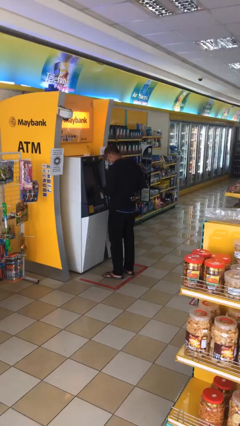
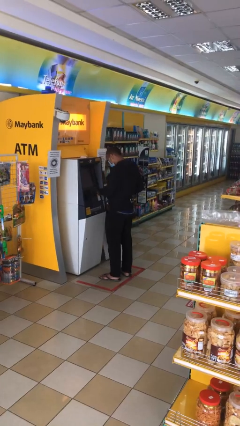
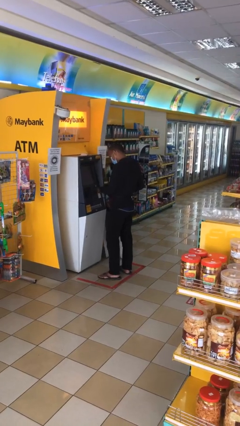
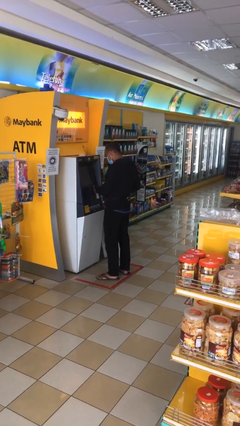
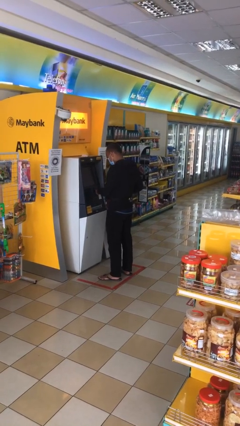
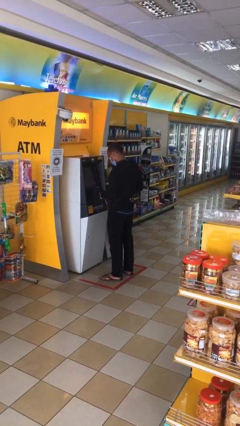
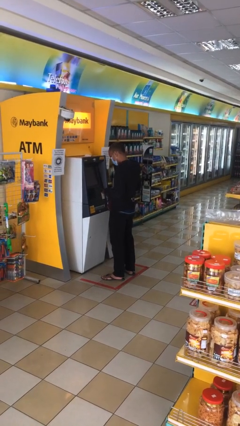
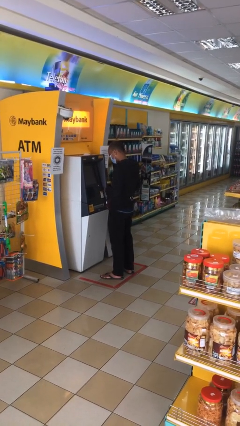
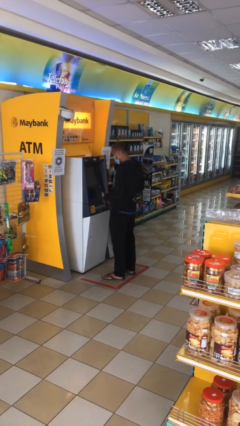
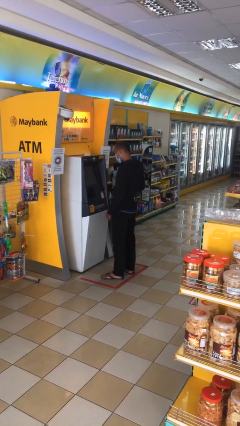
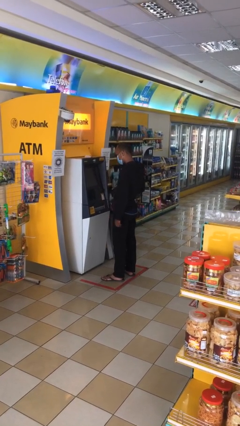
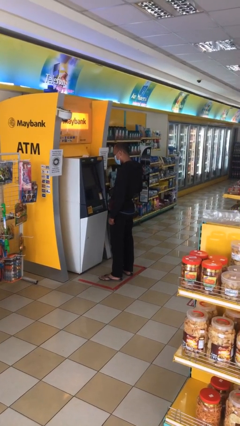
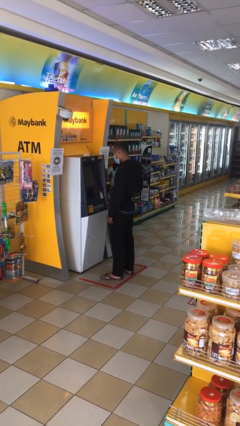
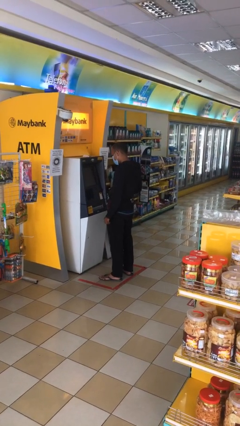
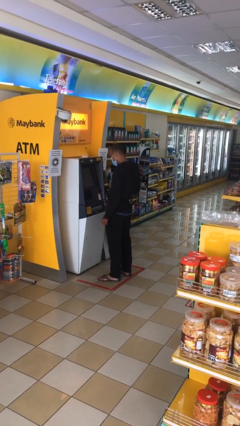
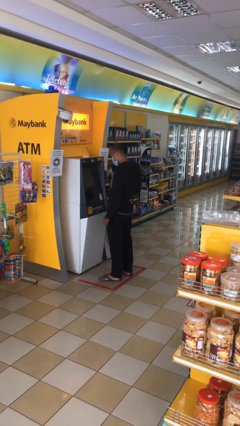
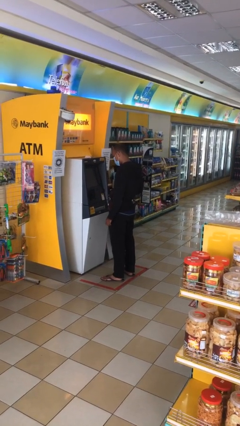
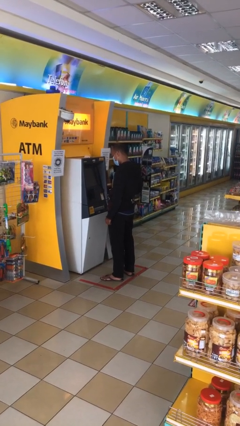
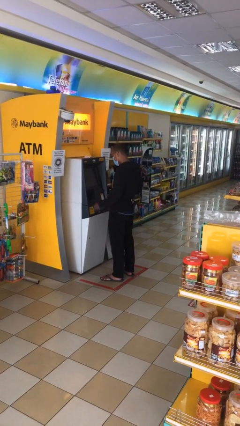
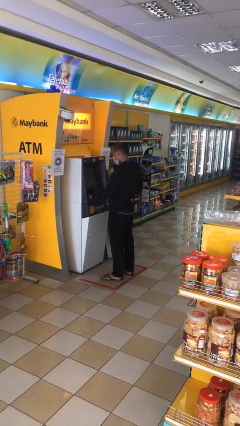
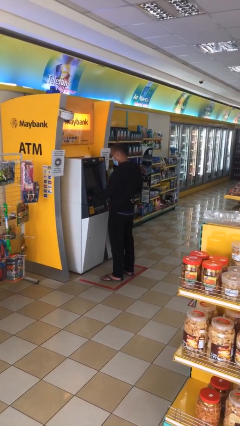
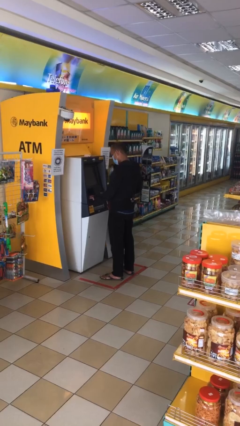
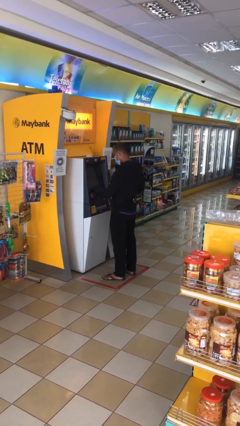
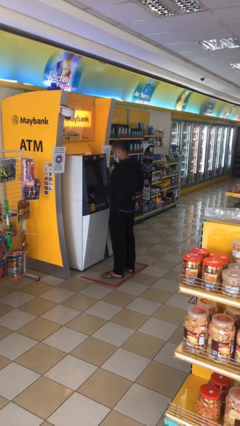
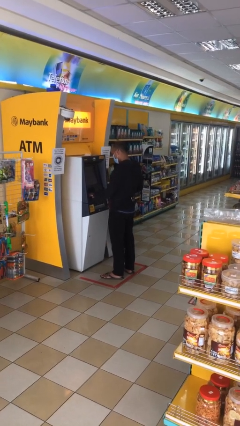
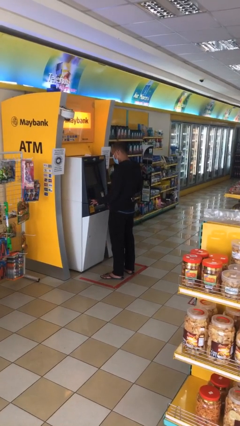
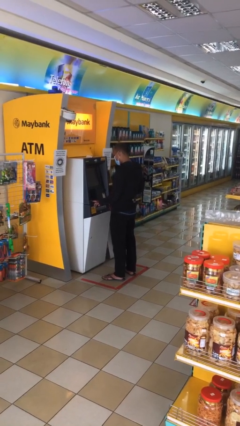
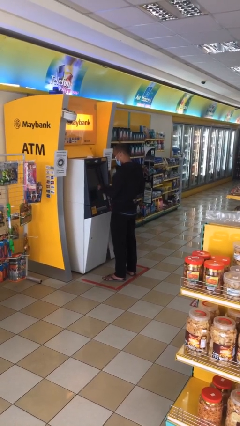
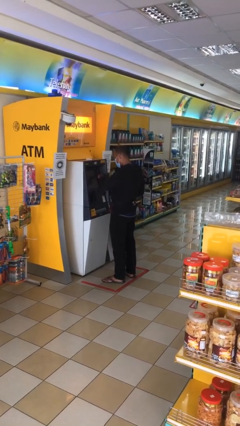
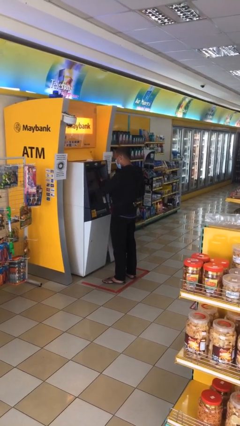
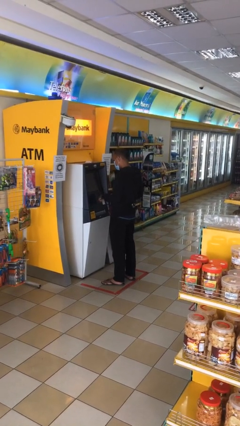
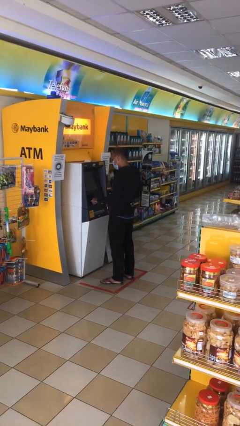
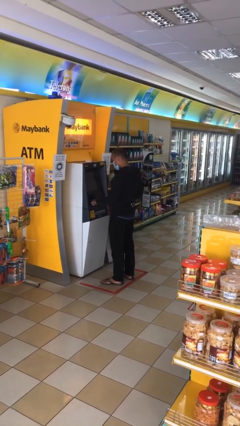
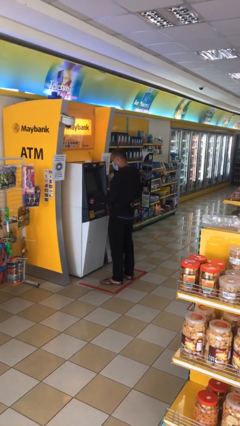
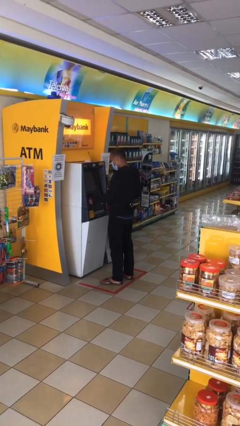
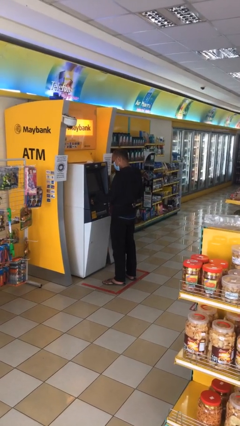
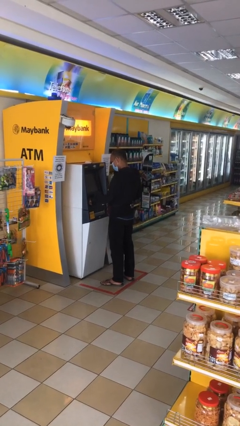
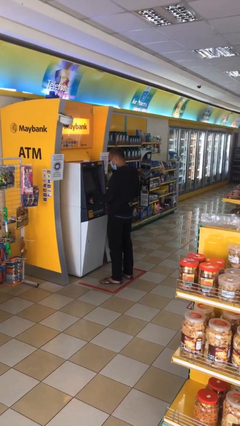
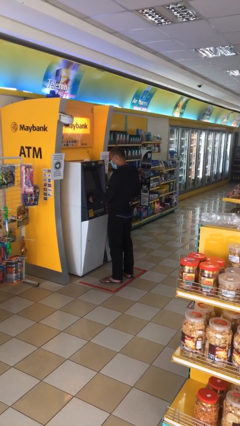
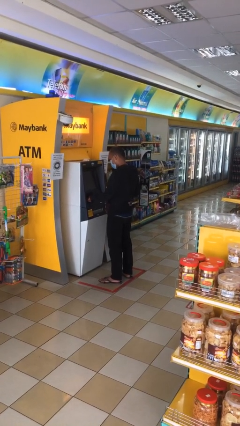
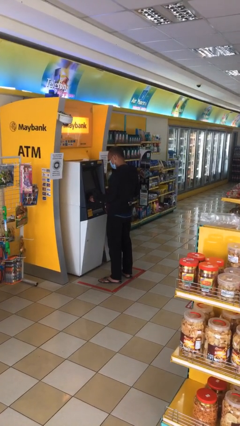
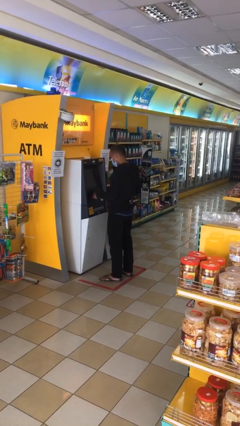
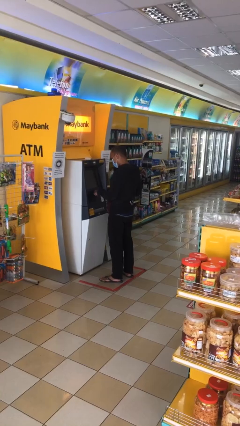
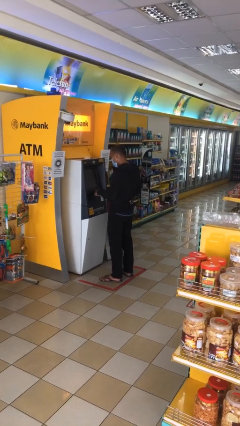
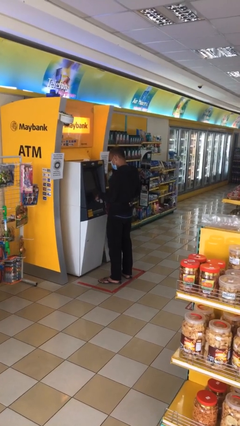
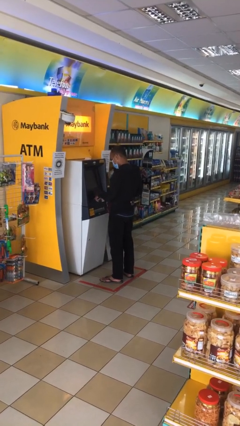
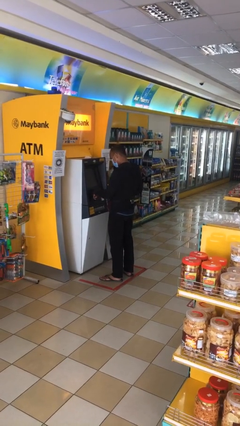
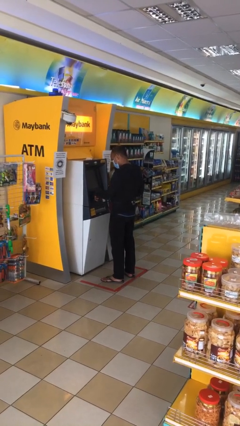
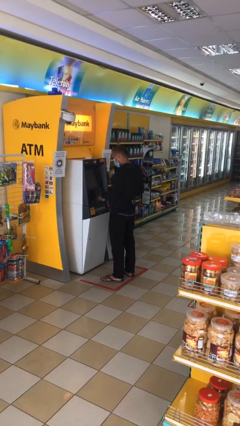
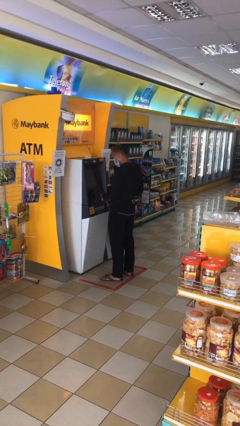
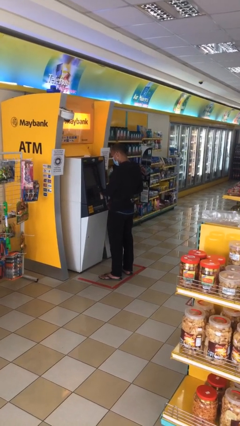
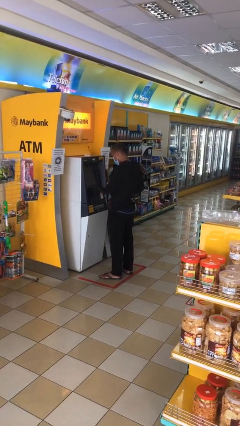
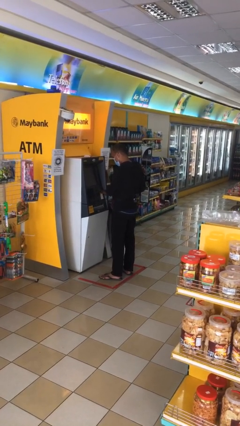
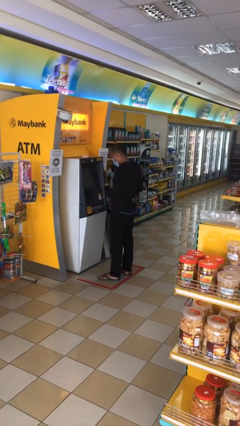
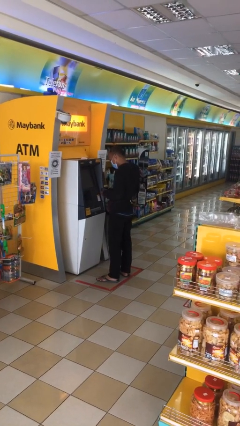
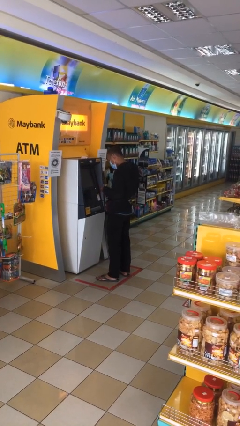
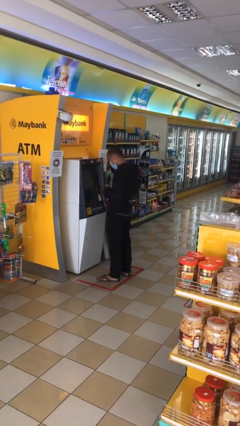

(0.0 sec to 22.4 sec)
person purchases from machine

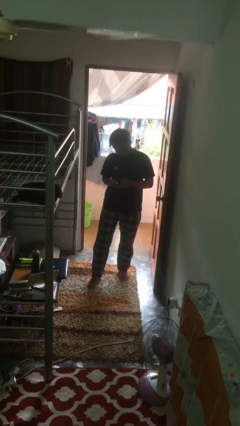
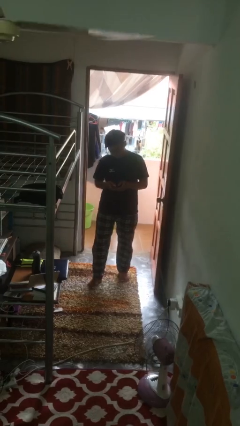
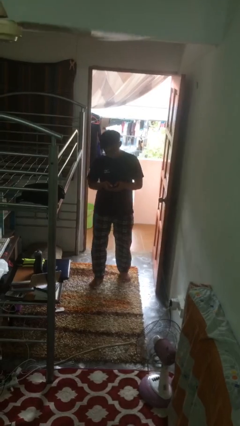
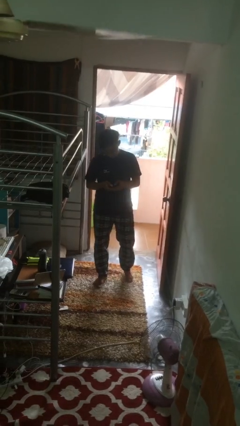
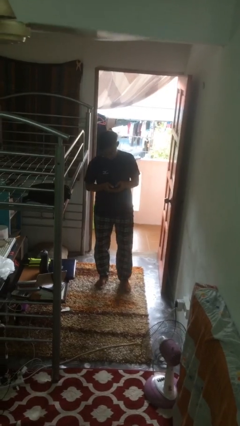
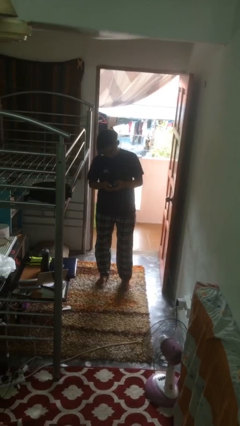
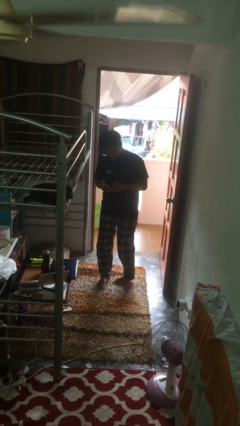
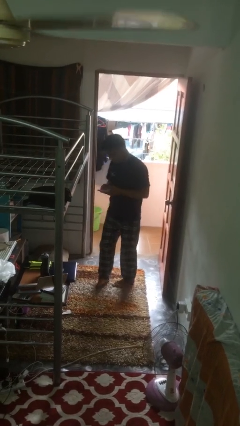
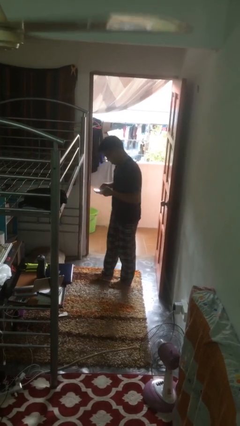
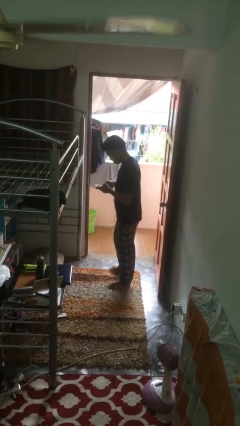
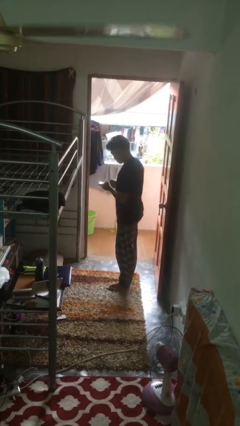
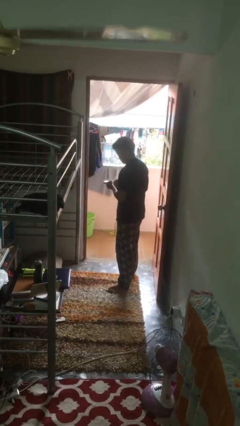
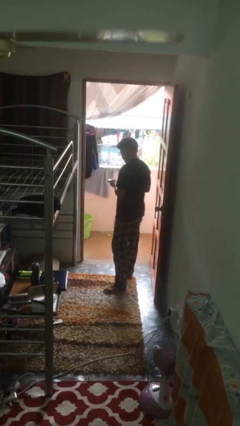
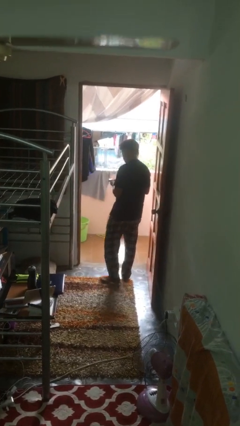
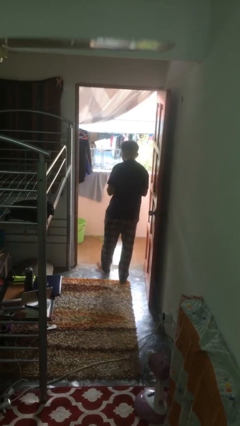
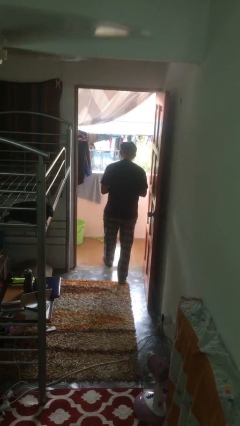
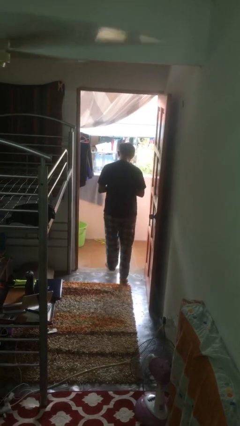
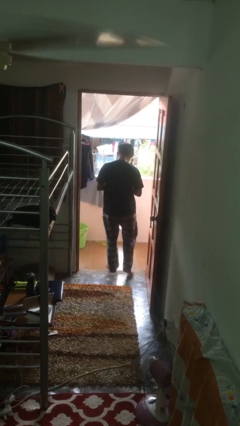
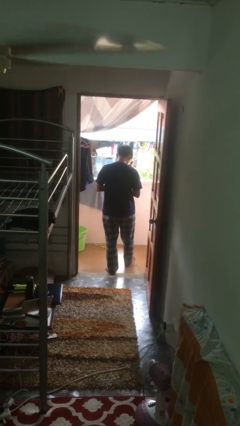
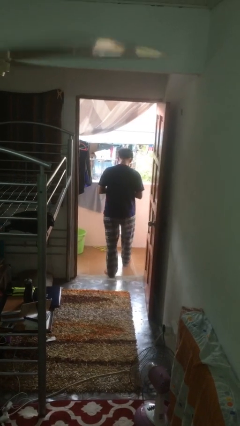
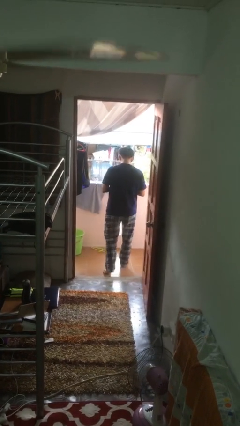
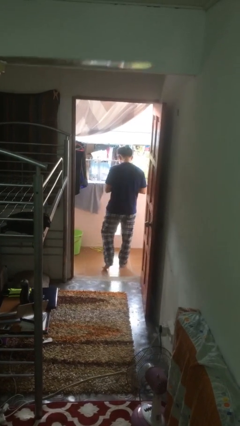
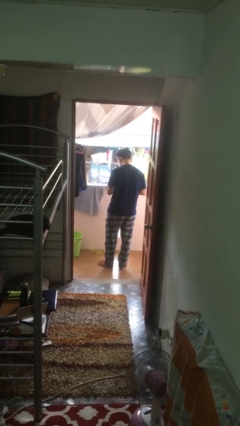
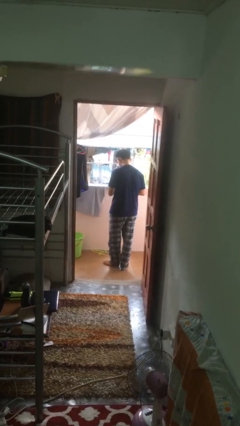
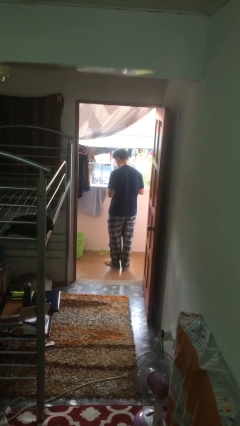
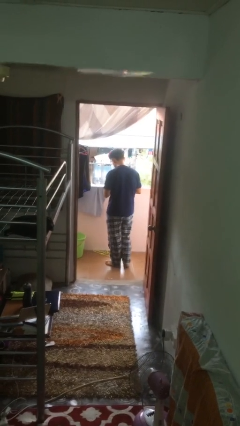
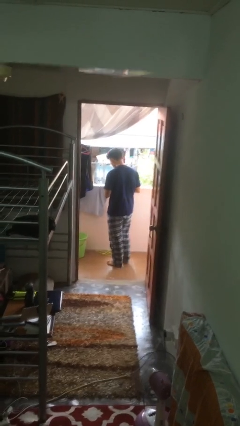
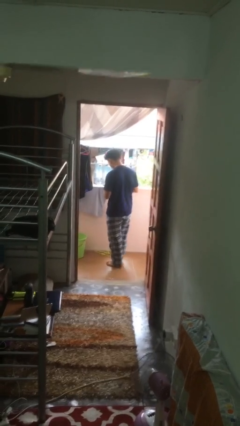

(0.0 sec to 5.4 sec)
person exits scene through structure

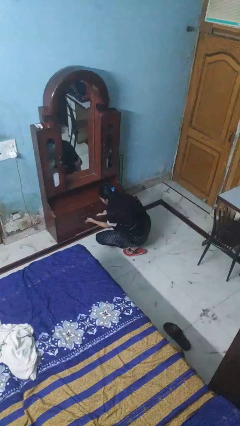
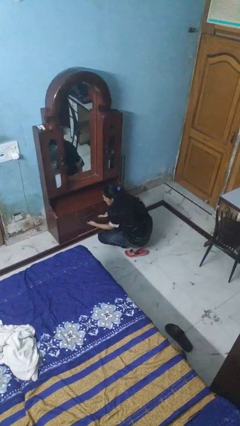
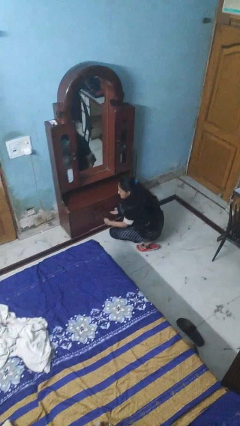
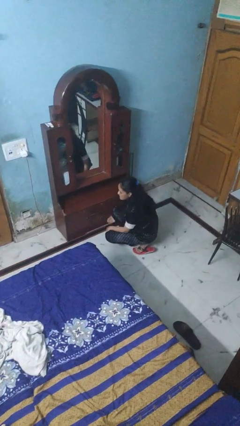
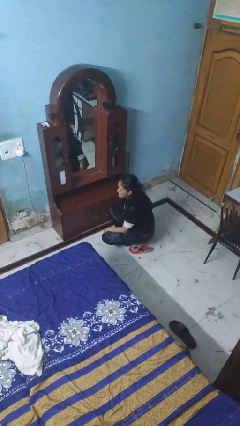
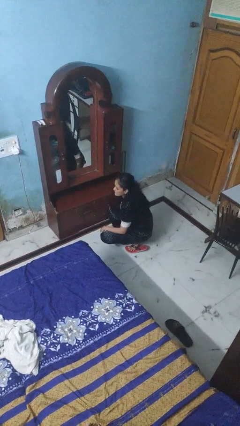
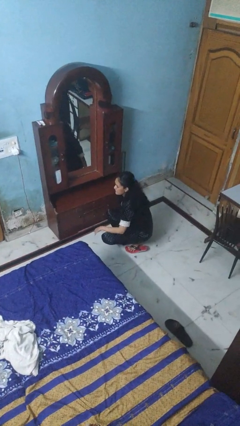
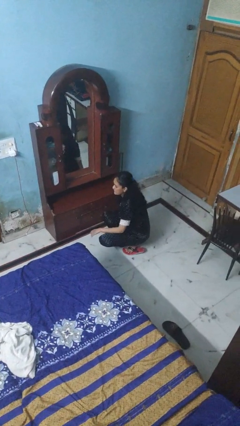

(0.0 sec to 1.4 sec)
person closes dresser drawer
